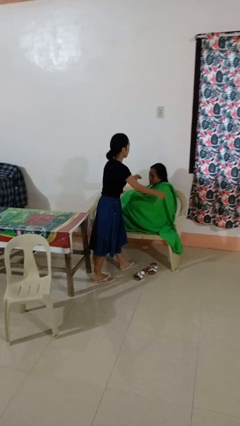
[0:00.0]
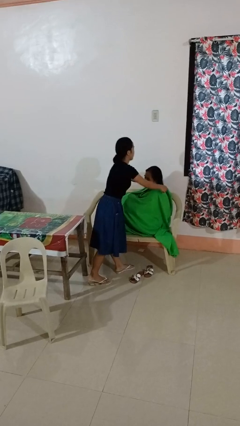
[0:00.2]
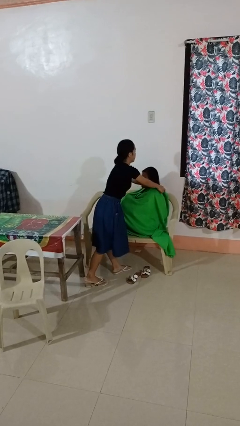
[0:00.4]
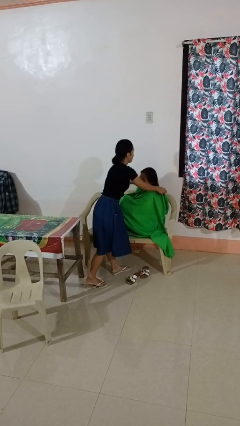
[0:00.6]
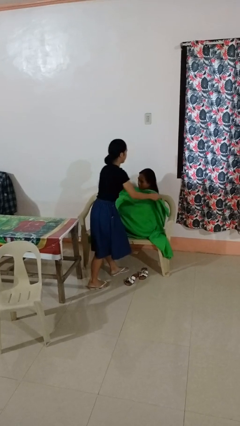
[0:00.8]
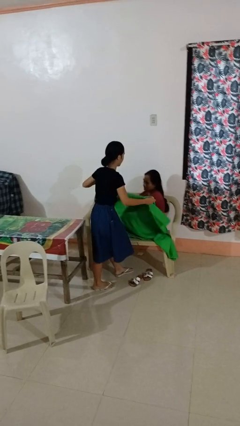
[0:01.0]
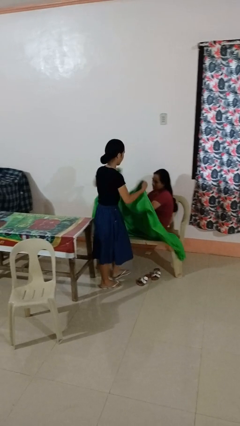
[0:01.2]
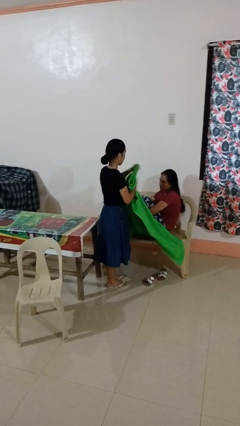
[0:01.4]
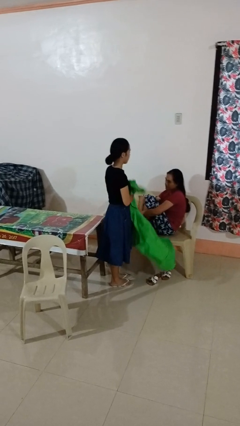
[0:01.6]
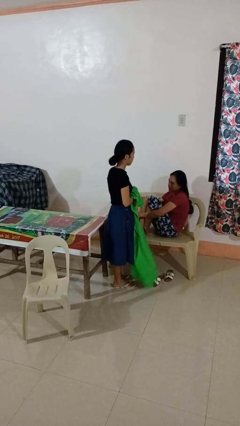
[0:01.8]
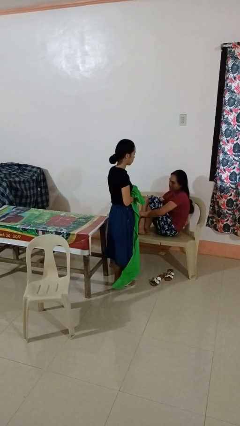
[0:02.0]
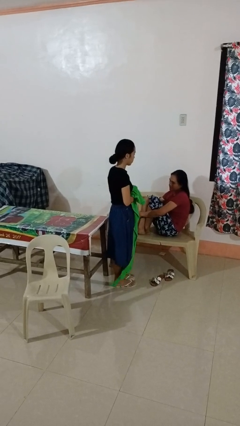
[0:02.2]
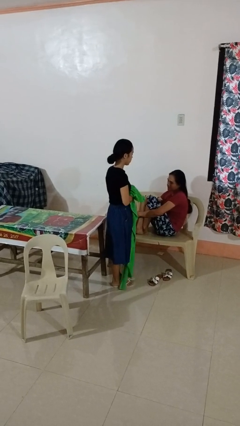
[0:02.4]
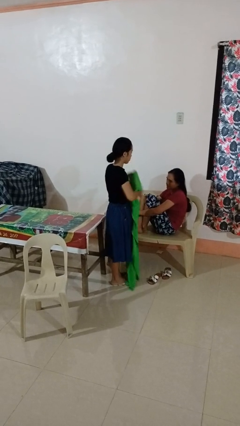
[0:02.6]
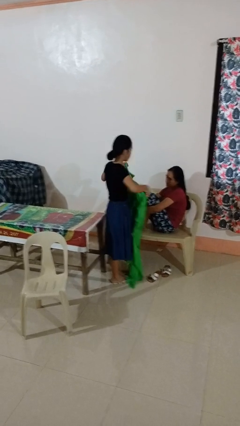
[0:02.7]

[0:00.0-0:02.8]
person uncovers friend with blanket

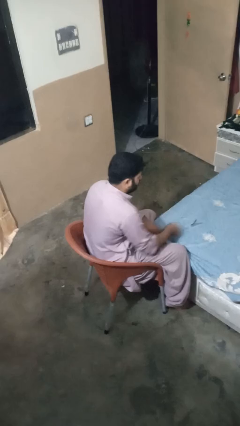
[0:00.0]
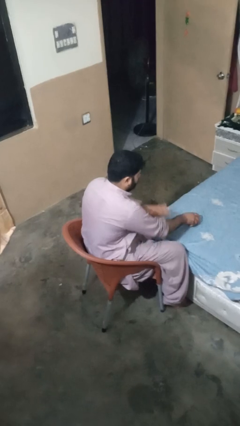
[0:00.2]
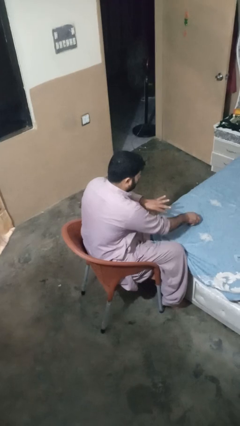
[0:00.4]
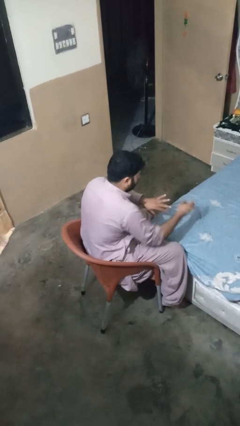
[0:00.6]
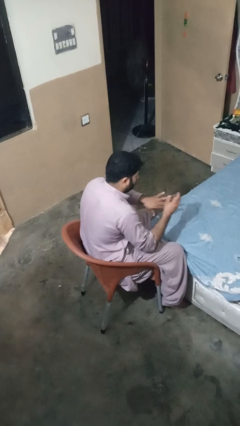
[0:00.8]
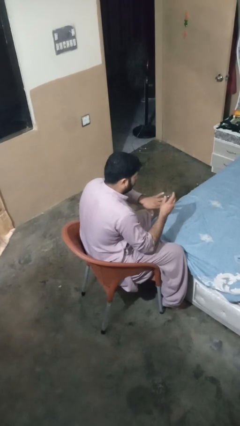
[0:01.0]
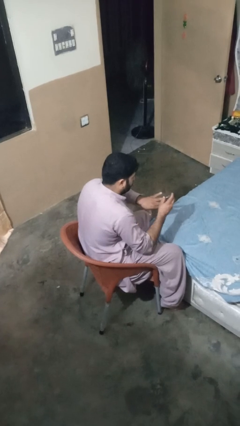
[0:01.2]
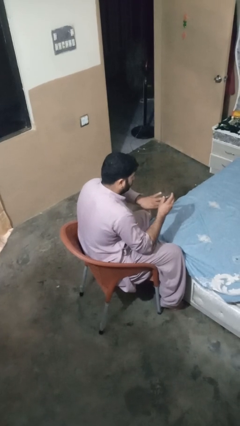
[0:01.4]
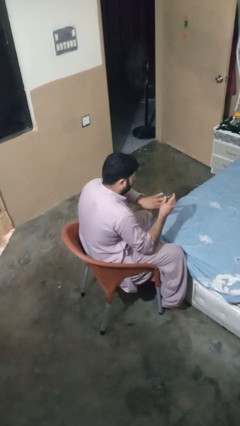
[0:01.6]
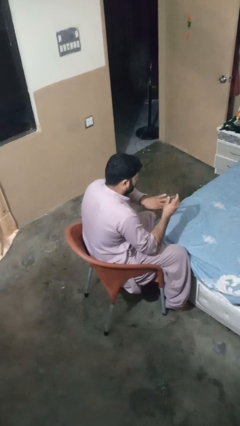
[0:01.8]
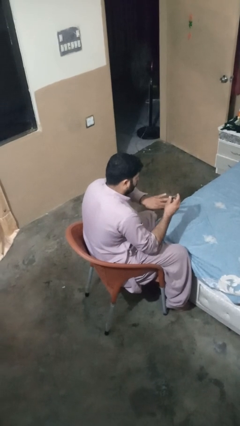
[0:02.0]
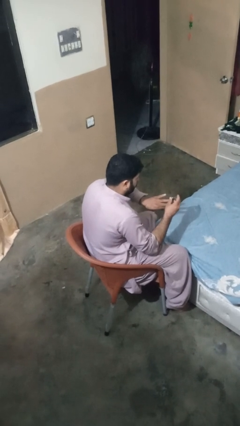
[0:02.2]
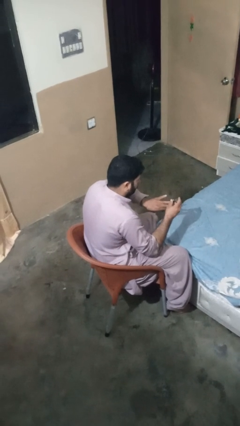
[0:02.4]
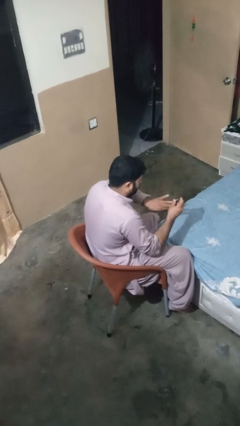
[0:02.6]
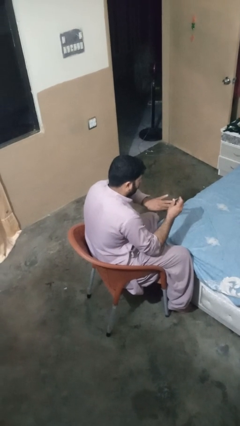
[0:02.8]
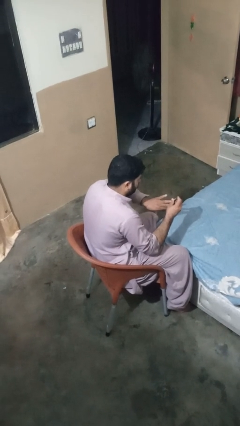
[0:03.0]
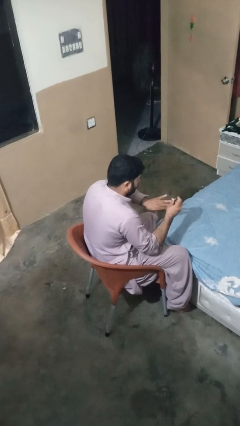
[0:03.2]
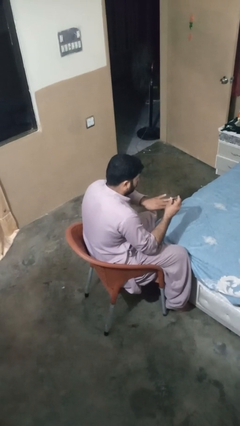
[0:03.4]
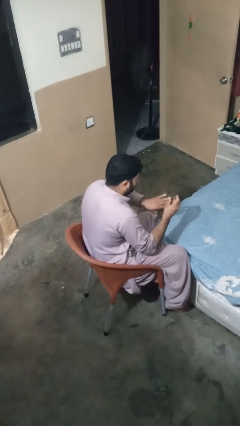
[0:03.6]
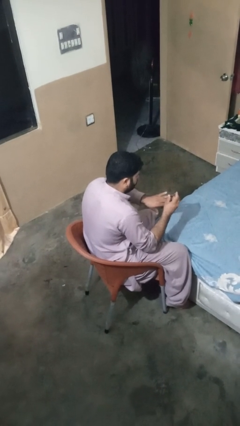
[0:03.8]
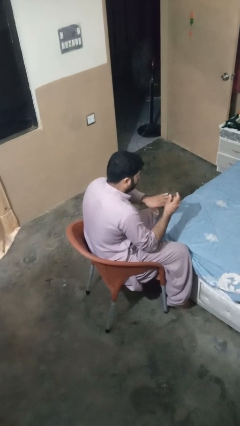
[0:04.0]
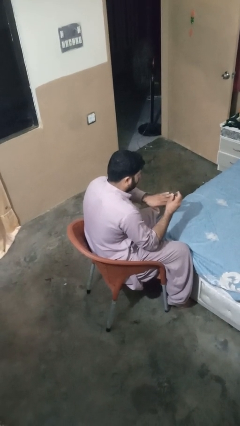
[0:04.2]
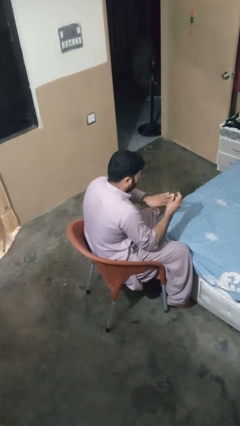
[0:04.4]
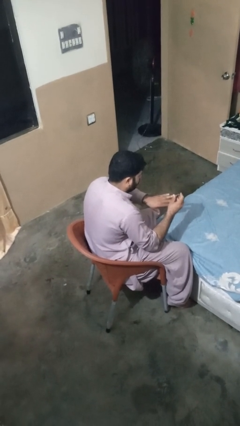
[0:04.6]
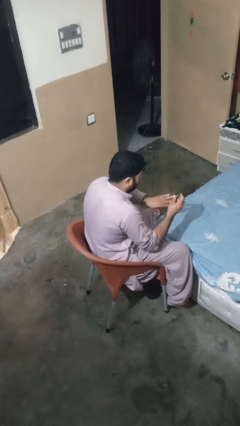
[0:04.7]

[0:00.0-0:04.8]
person clips fingernails

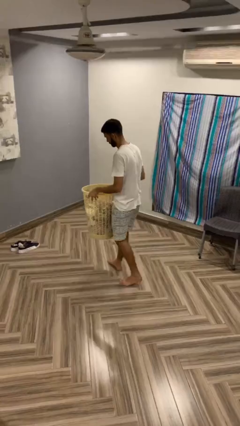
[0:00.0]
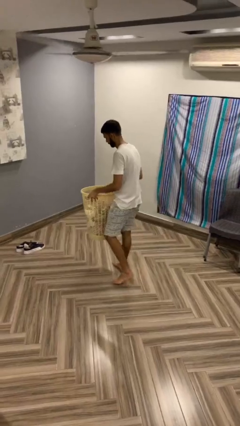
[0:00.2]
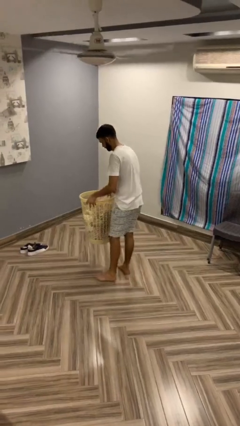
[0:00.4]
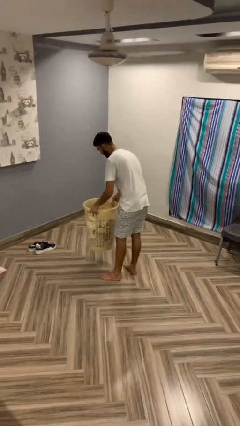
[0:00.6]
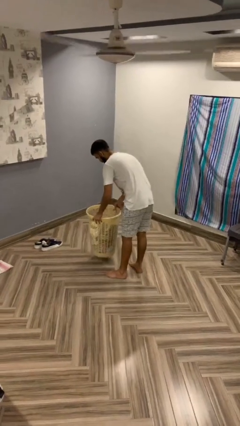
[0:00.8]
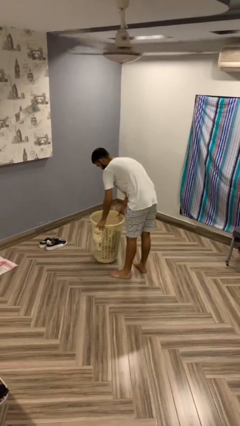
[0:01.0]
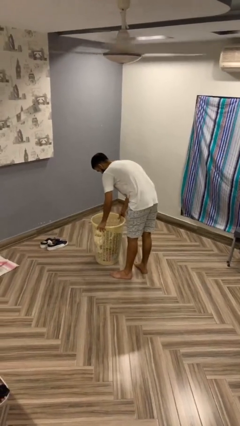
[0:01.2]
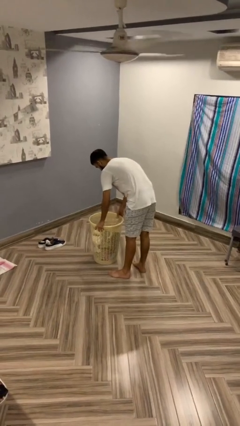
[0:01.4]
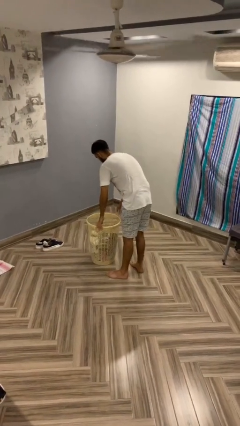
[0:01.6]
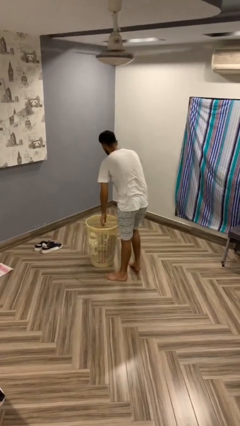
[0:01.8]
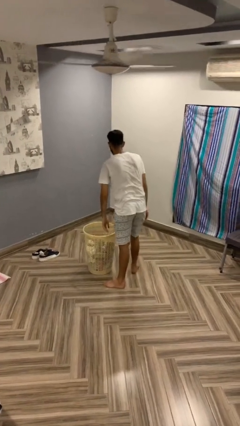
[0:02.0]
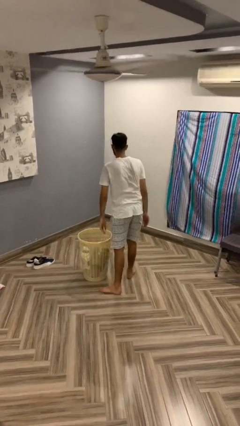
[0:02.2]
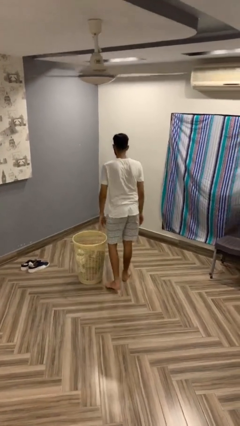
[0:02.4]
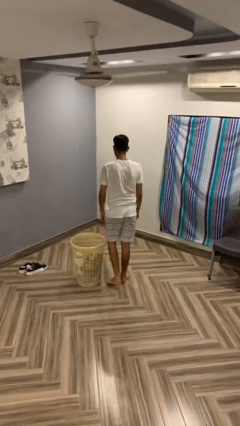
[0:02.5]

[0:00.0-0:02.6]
person puts down object on floor

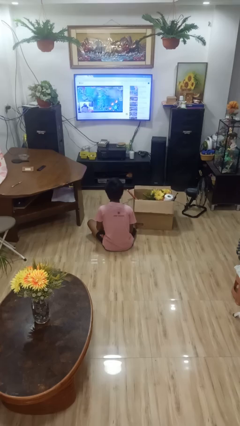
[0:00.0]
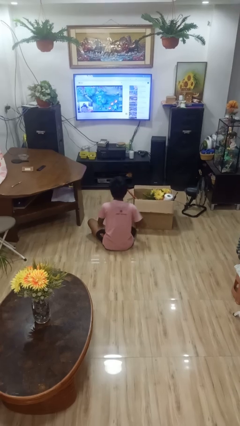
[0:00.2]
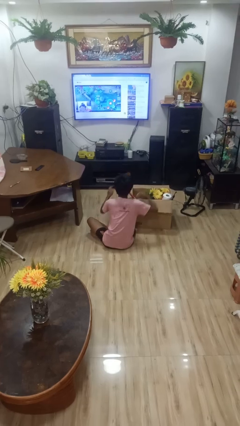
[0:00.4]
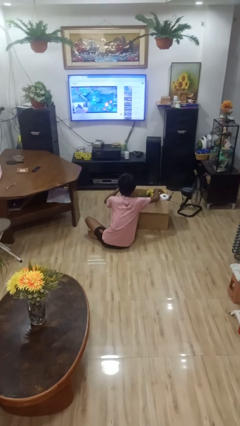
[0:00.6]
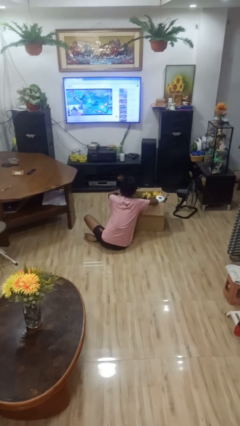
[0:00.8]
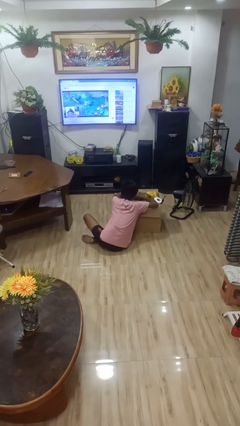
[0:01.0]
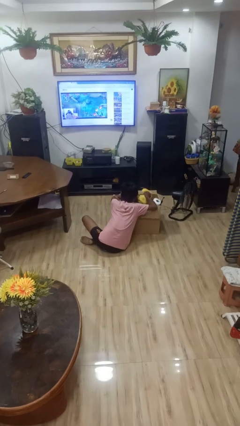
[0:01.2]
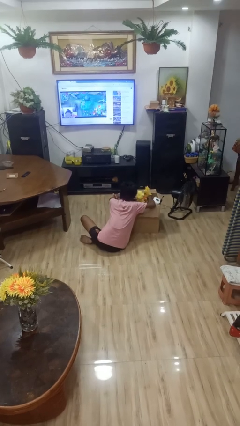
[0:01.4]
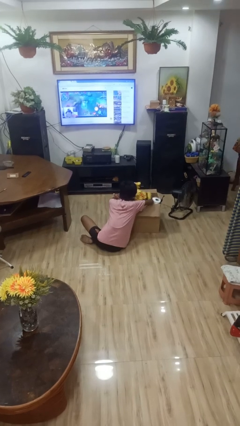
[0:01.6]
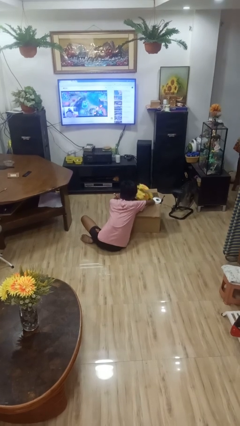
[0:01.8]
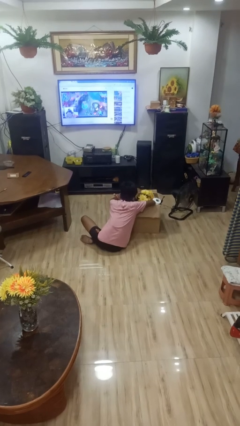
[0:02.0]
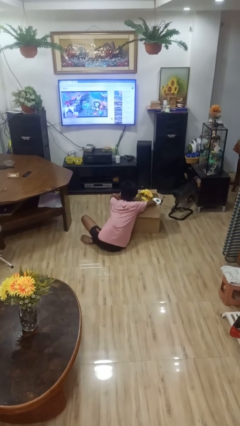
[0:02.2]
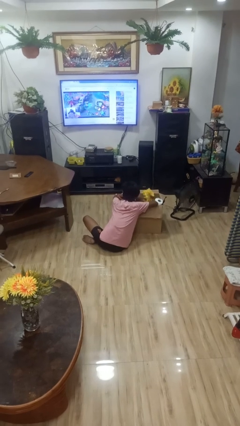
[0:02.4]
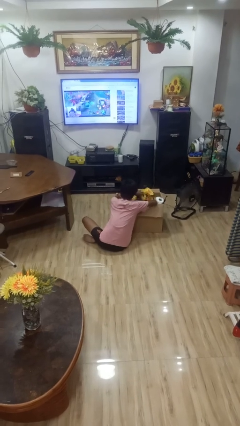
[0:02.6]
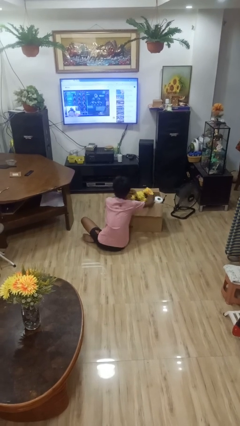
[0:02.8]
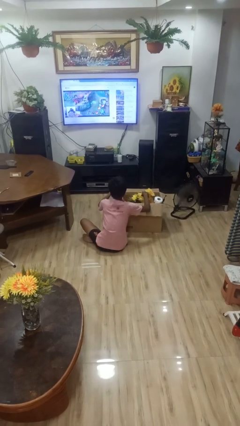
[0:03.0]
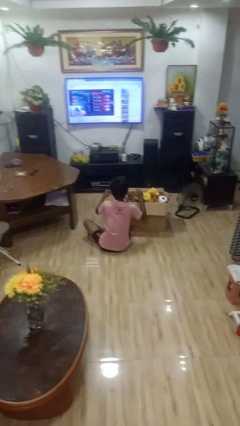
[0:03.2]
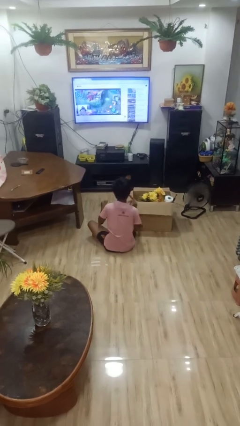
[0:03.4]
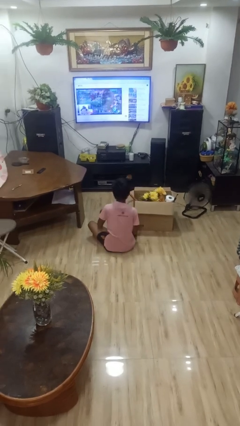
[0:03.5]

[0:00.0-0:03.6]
person searches in box

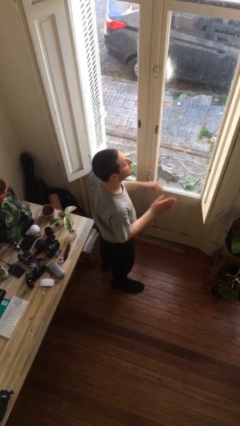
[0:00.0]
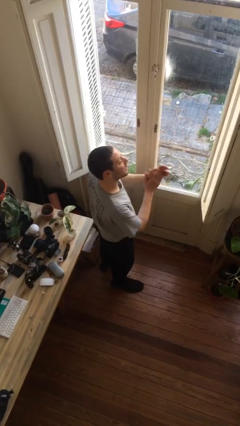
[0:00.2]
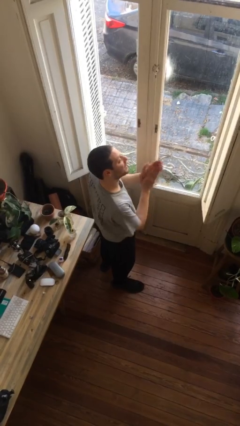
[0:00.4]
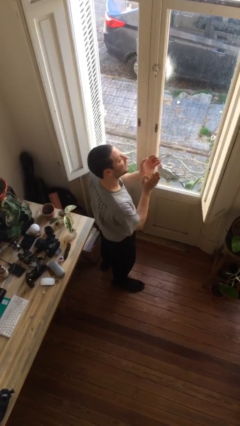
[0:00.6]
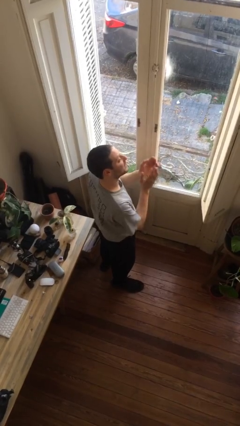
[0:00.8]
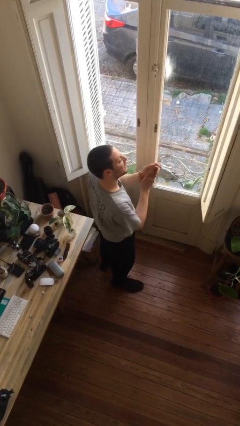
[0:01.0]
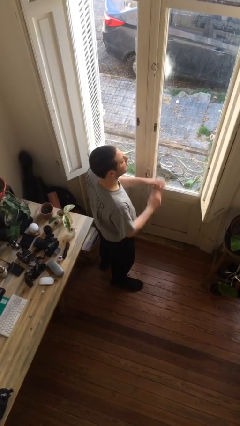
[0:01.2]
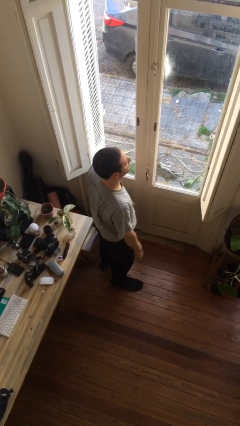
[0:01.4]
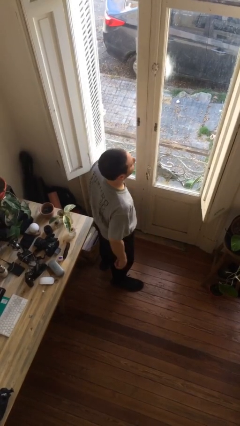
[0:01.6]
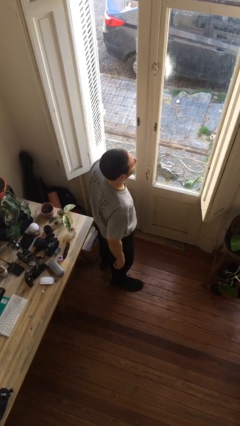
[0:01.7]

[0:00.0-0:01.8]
person claps hands

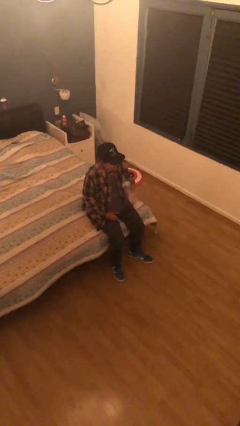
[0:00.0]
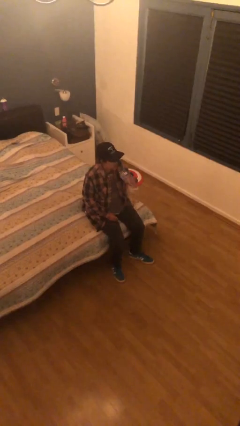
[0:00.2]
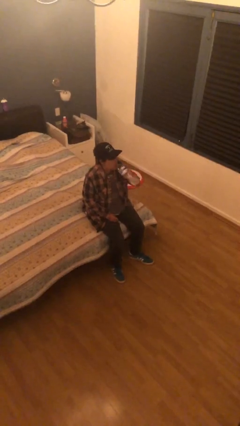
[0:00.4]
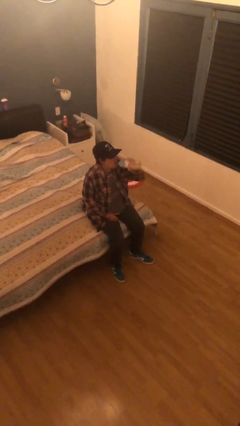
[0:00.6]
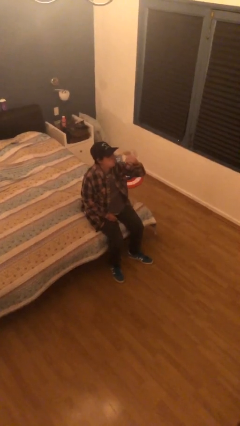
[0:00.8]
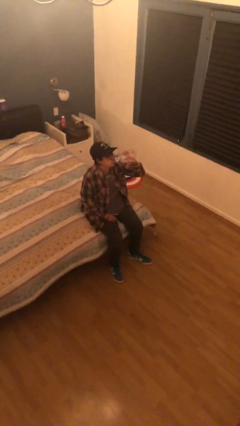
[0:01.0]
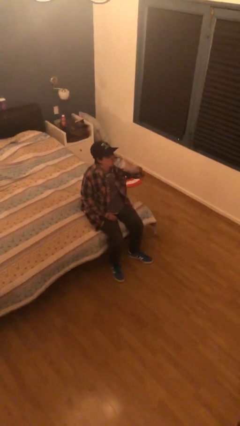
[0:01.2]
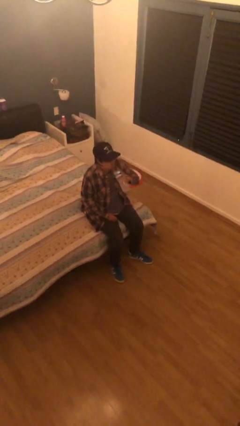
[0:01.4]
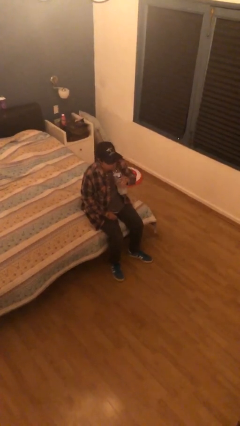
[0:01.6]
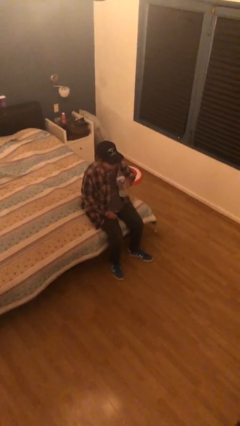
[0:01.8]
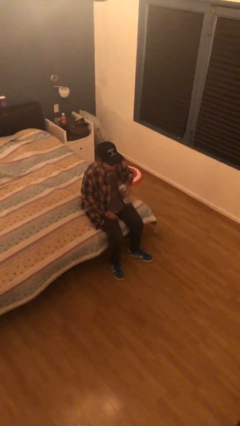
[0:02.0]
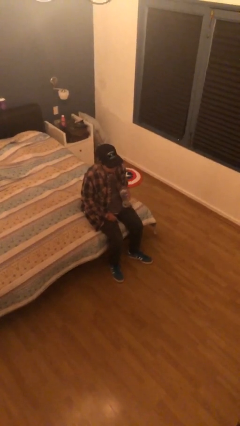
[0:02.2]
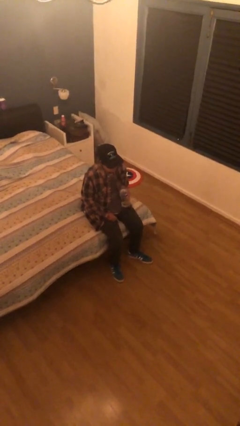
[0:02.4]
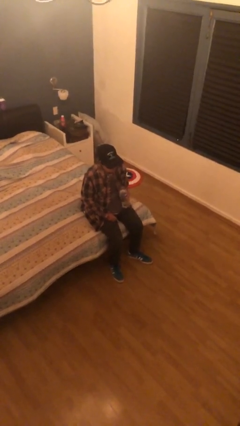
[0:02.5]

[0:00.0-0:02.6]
person drinks from bottle
